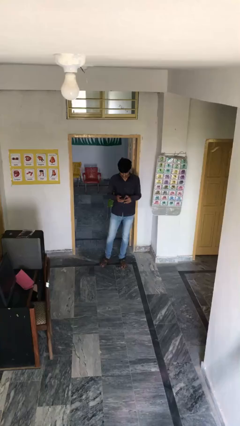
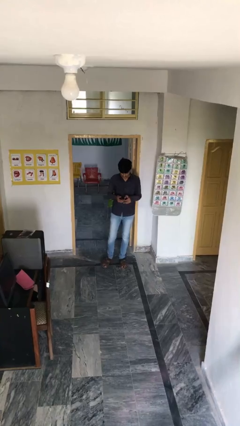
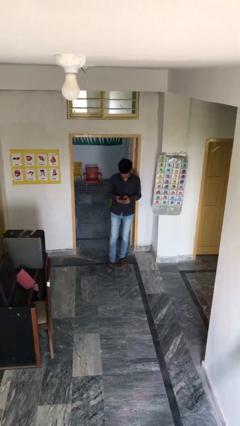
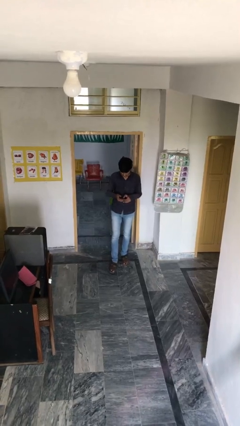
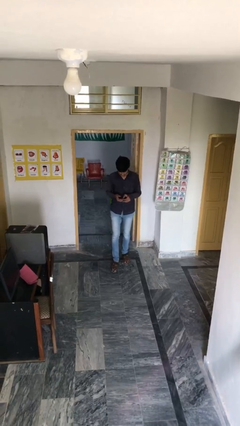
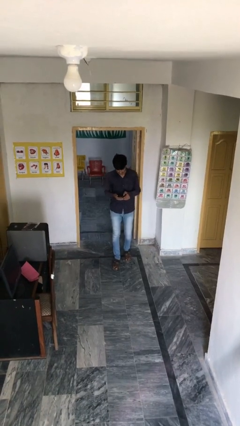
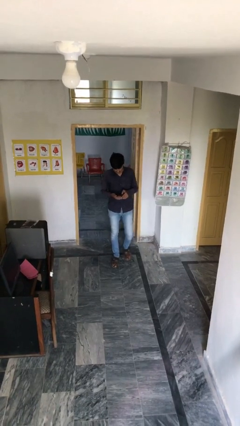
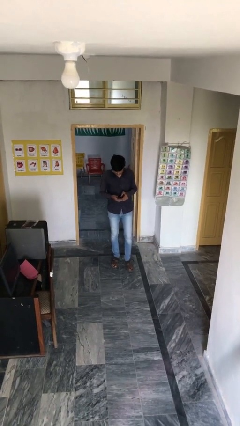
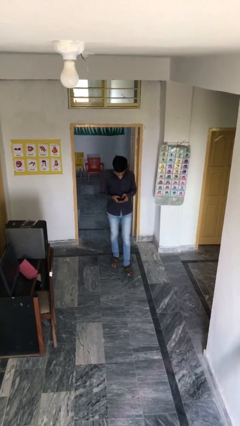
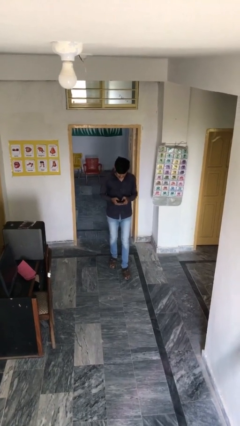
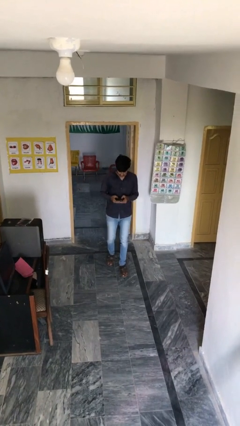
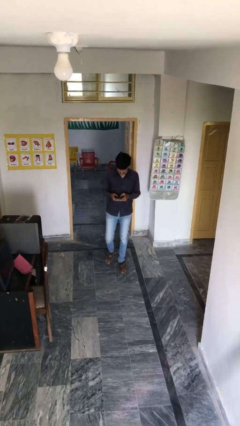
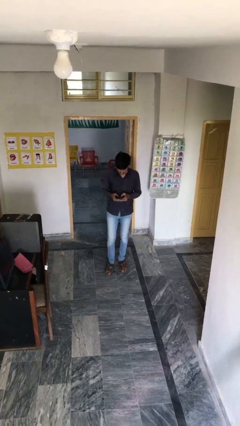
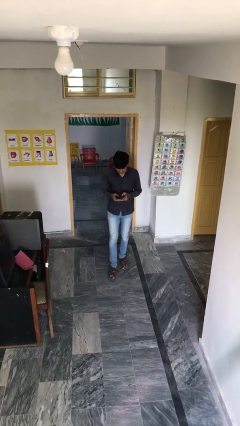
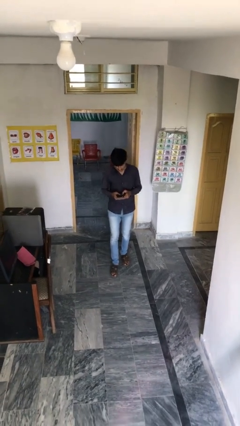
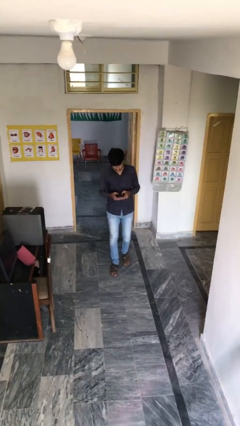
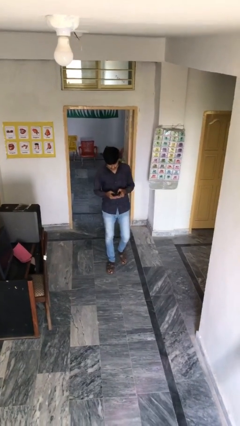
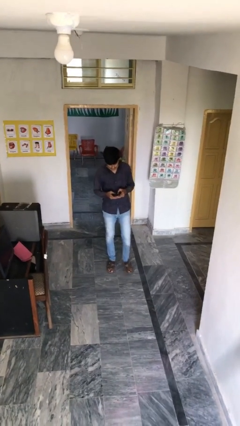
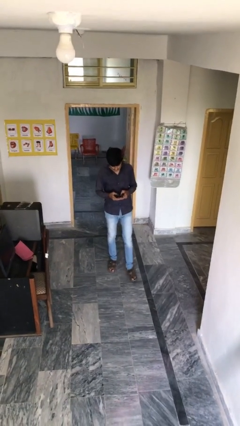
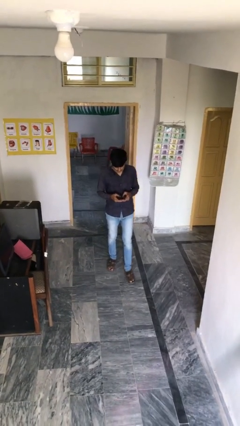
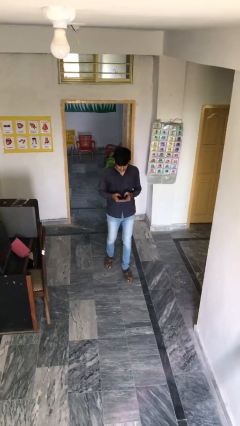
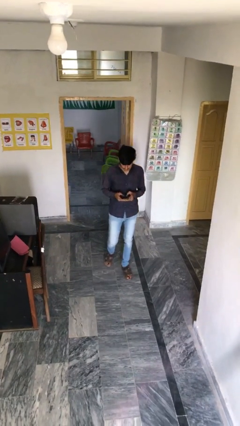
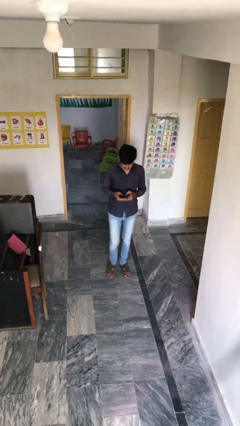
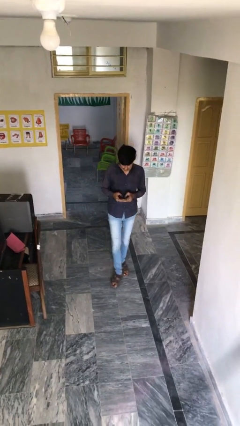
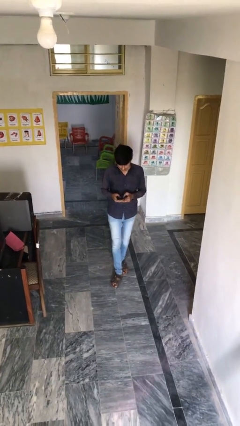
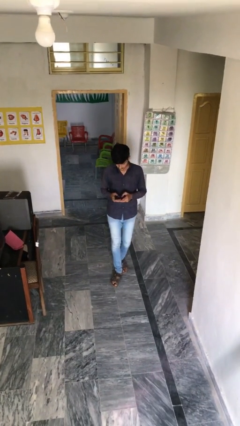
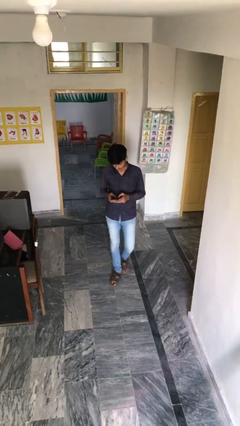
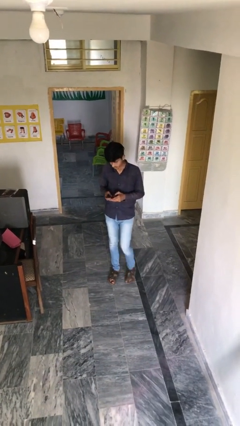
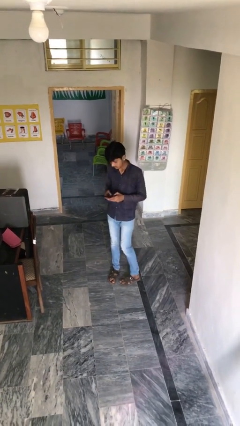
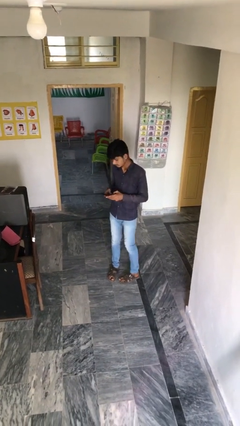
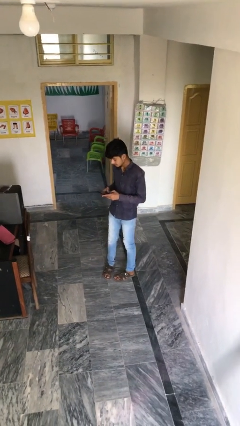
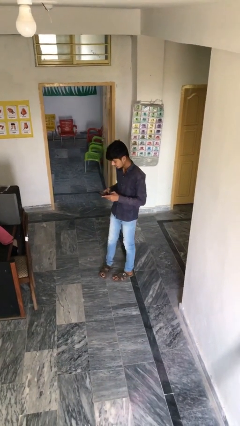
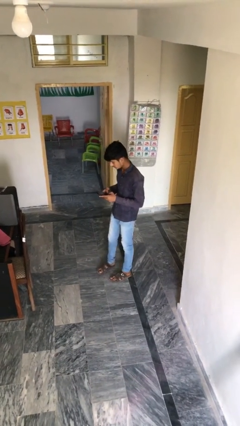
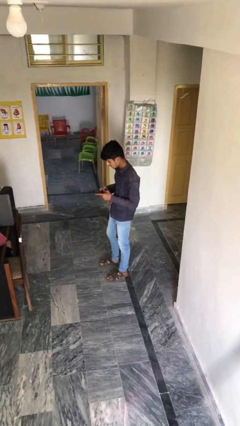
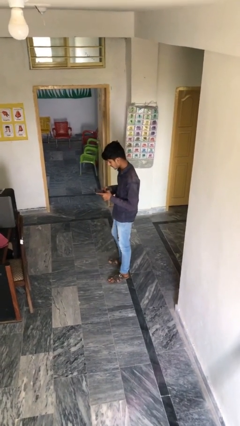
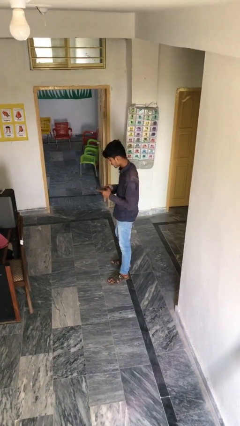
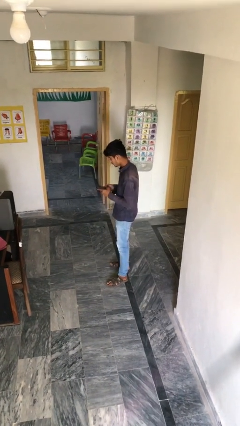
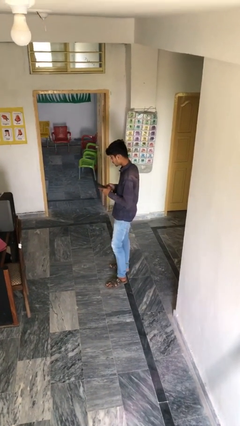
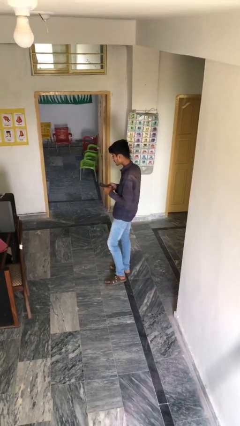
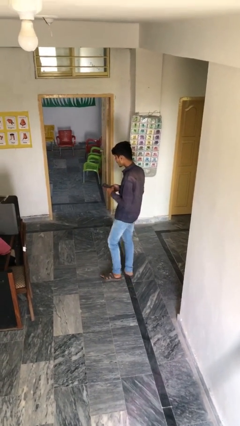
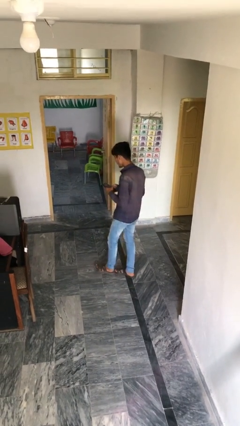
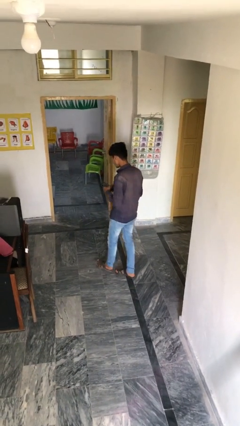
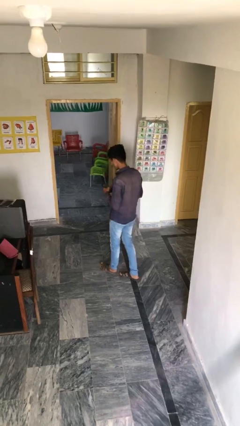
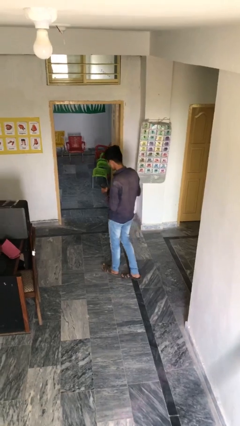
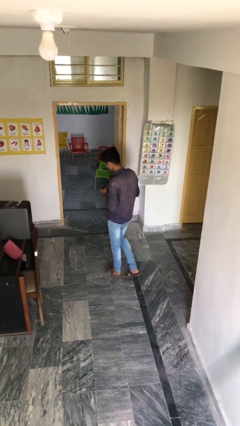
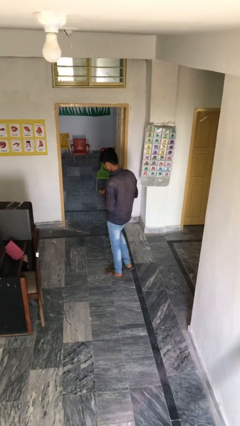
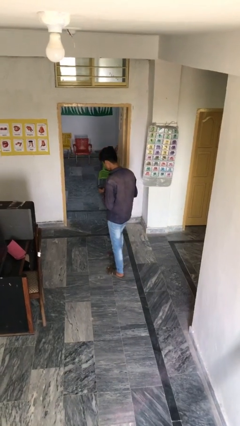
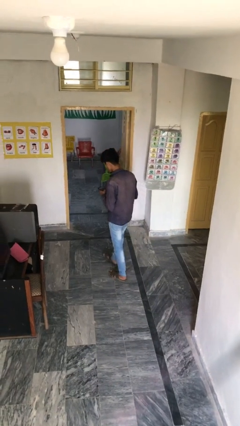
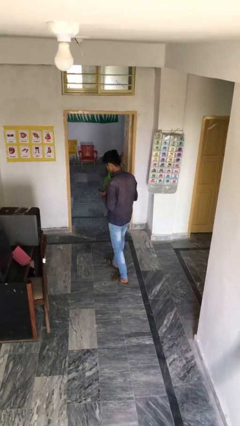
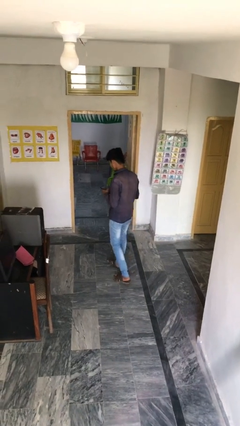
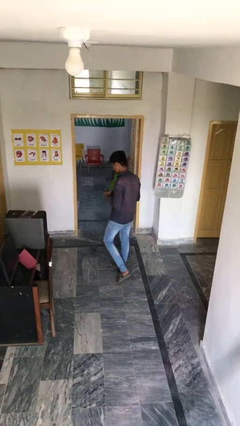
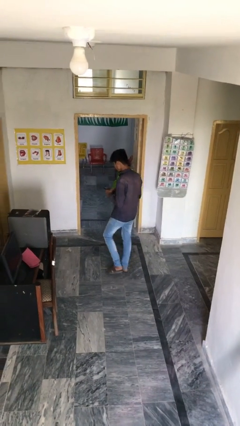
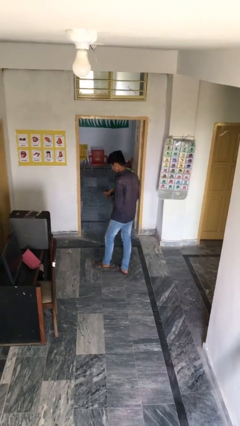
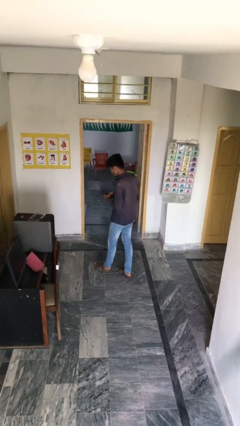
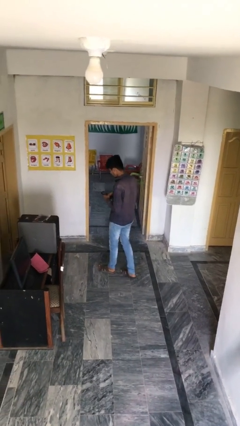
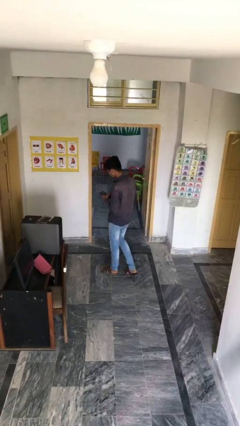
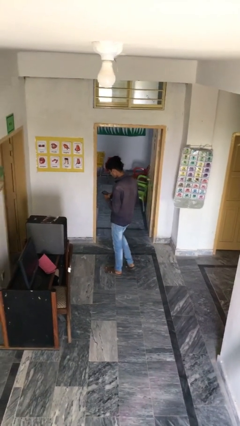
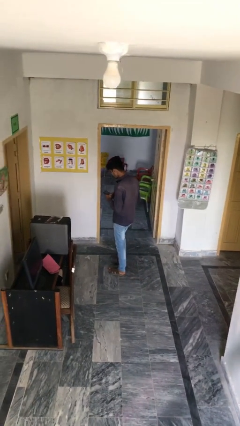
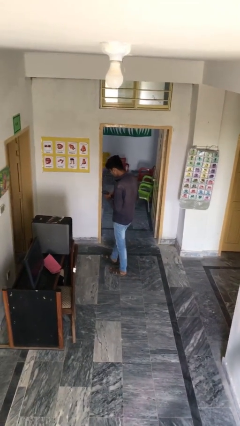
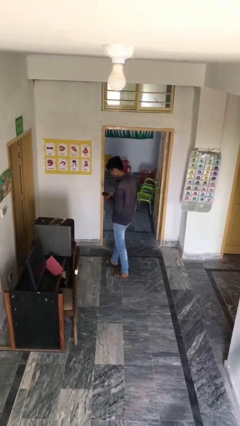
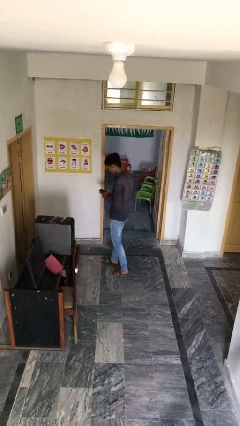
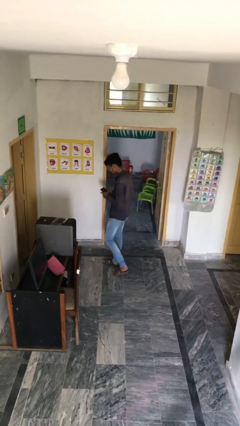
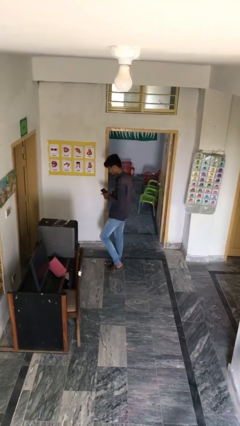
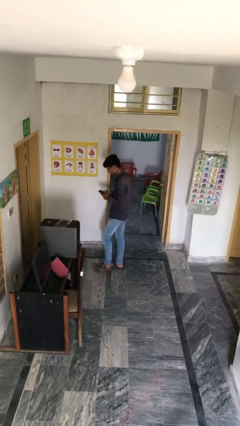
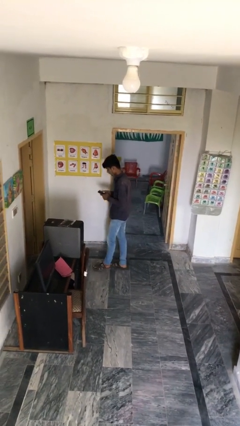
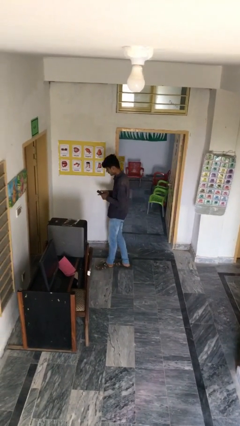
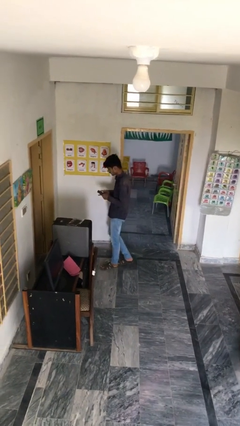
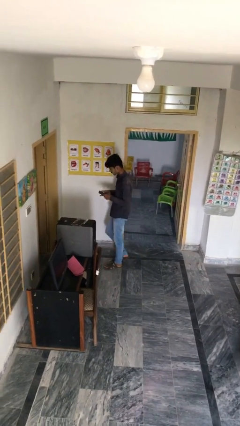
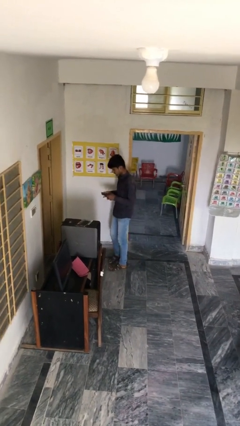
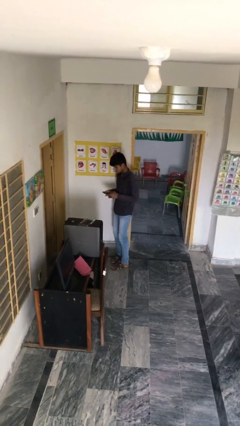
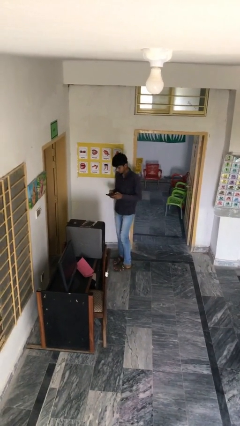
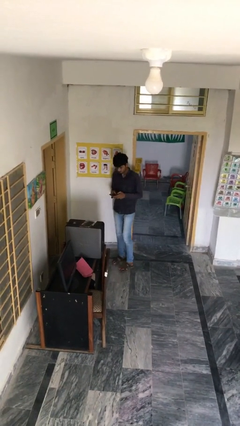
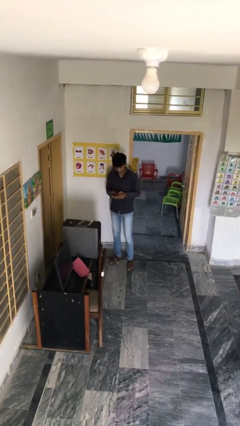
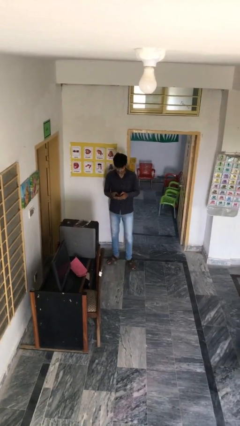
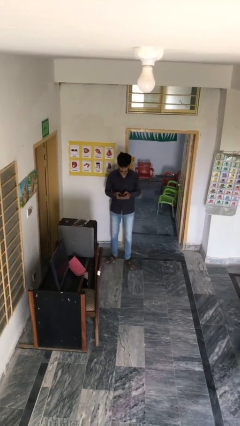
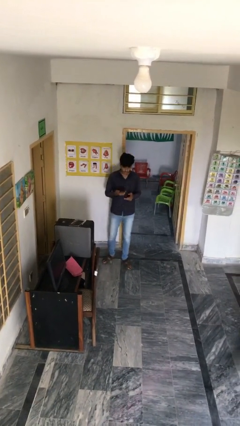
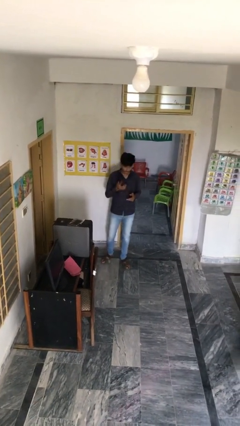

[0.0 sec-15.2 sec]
person texts on phone

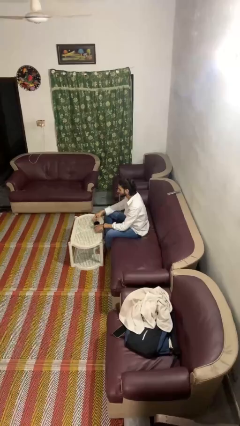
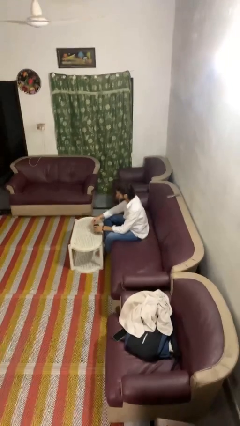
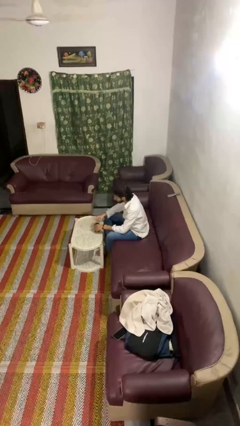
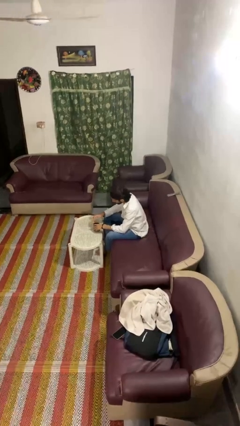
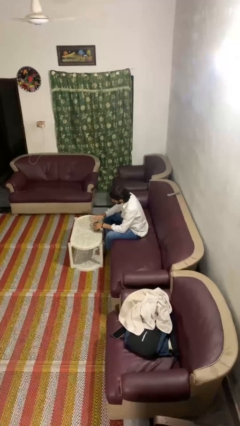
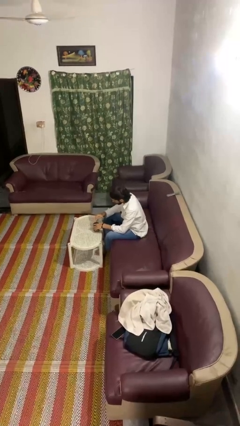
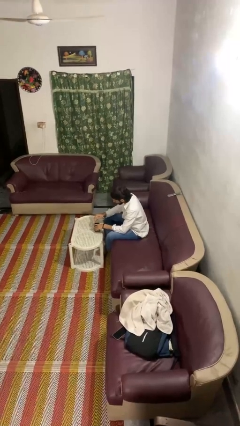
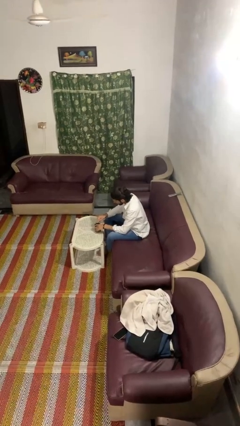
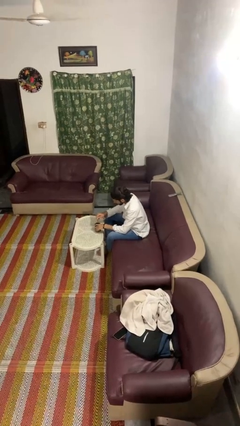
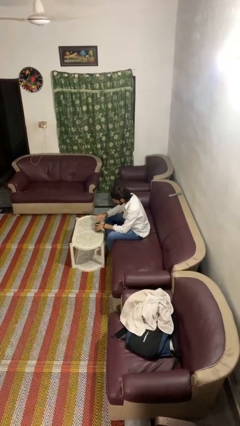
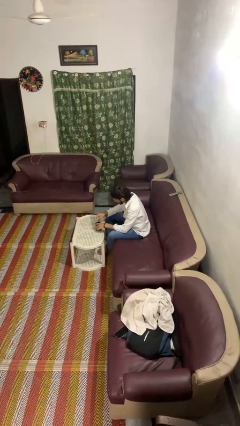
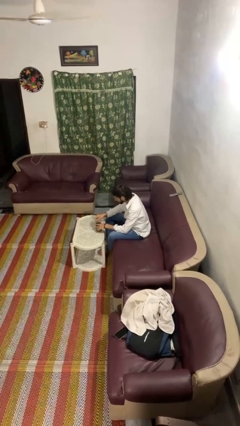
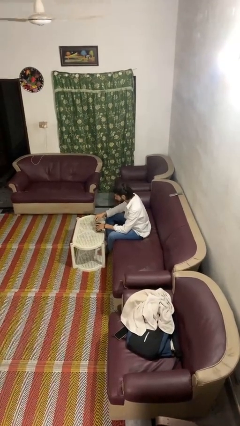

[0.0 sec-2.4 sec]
person stirs mug

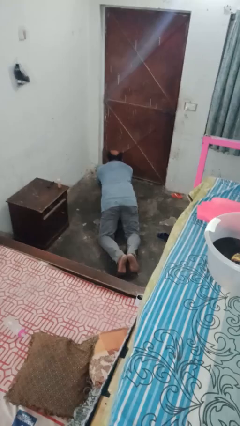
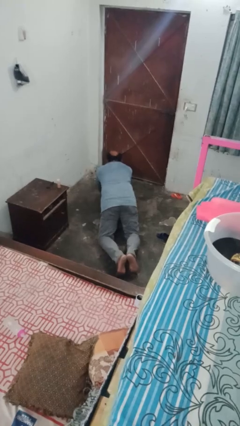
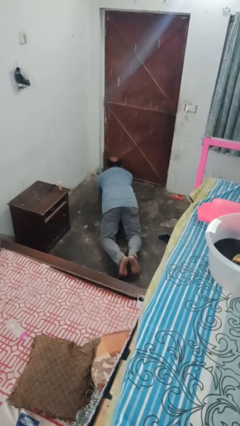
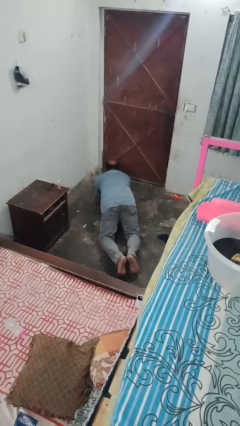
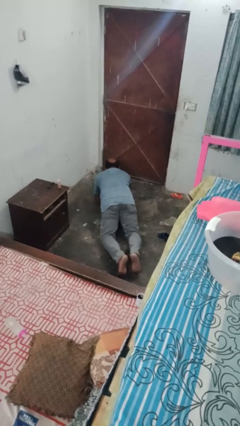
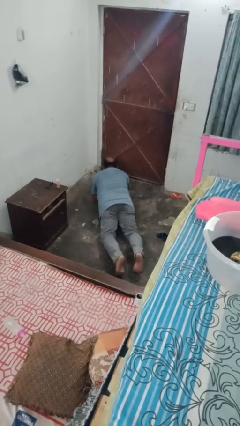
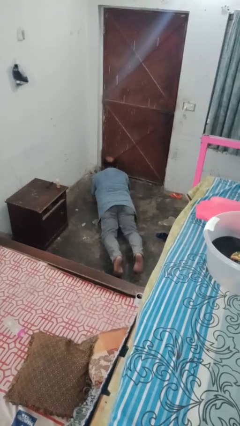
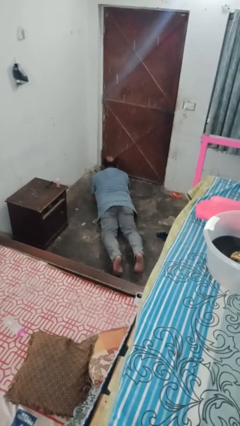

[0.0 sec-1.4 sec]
person stands up from floor
